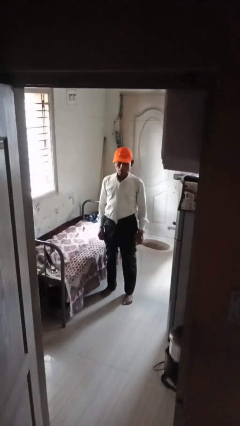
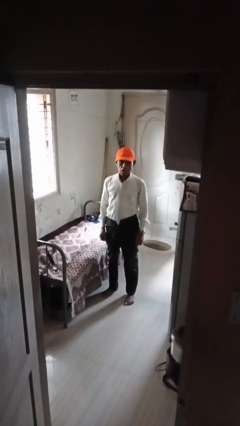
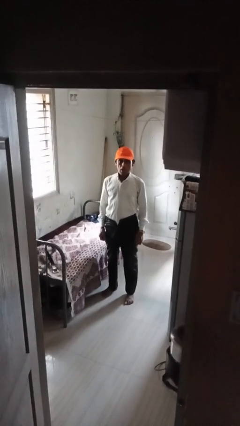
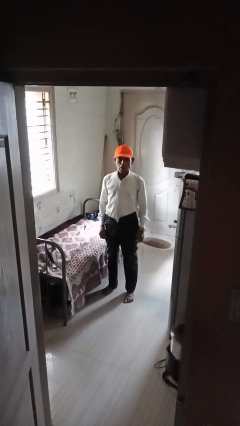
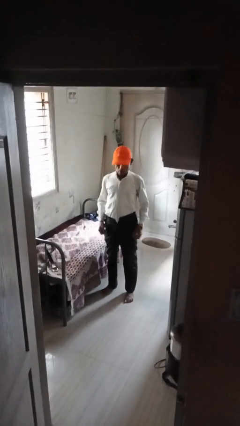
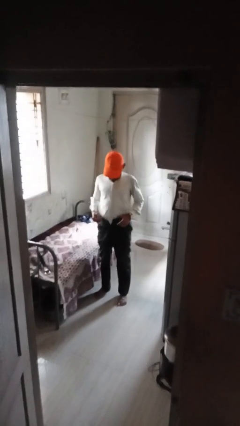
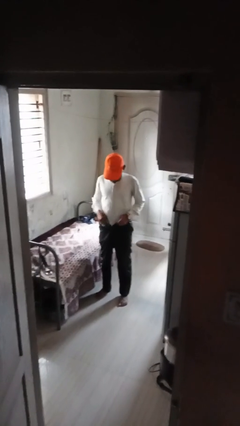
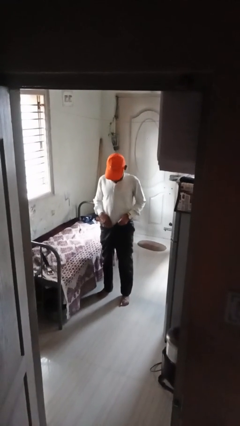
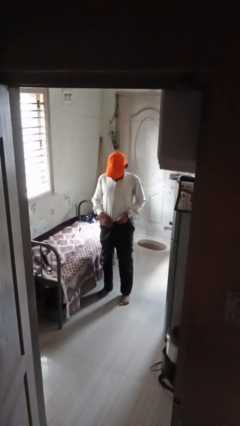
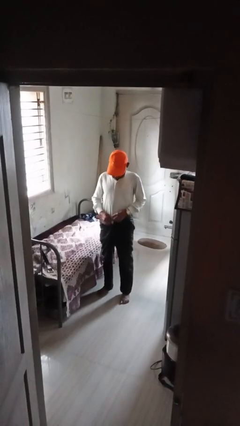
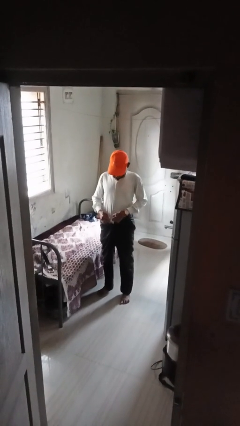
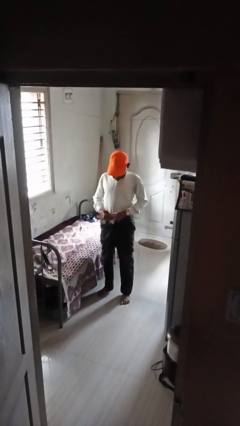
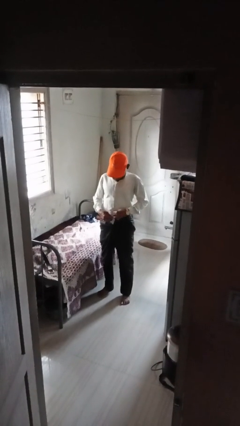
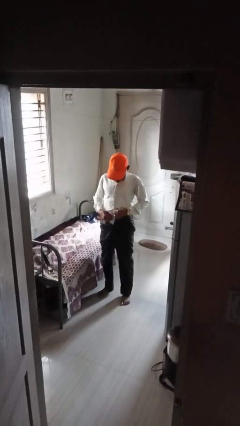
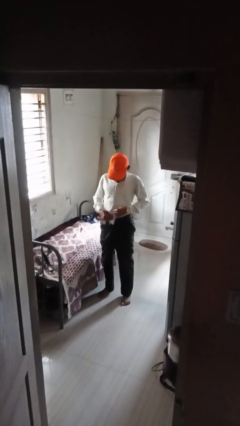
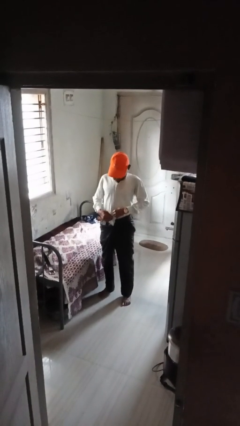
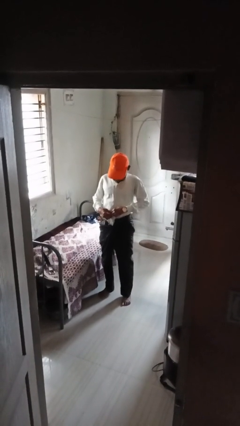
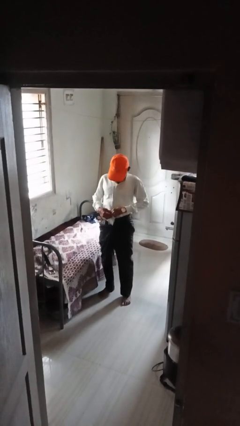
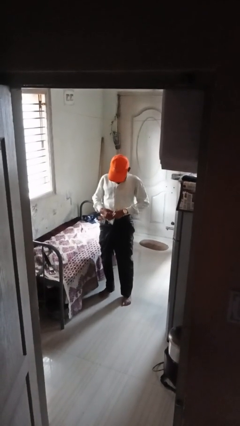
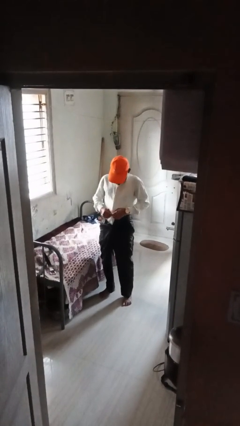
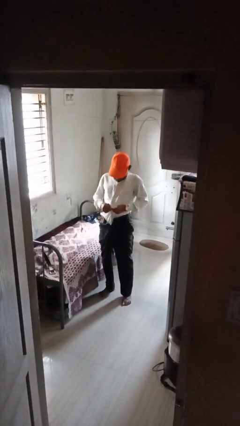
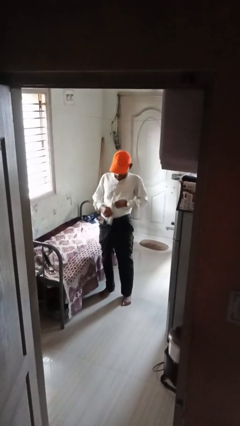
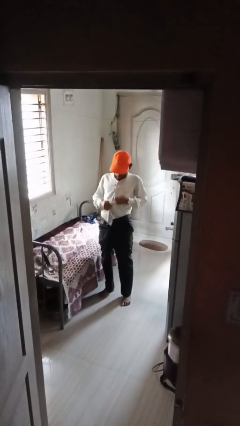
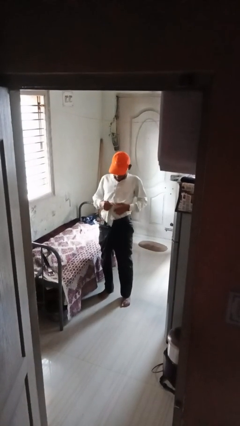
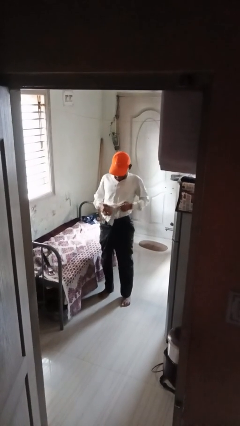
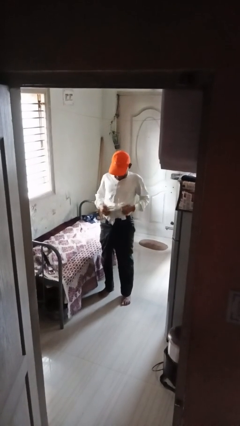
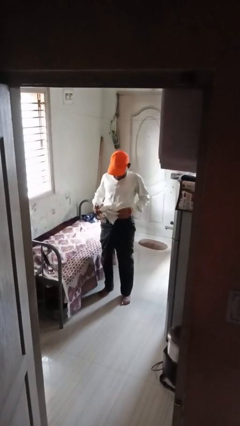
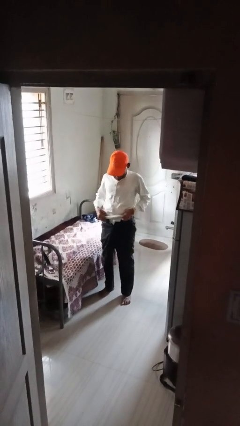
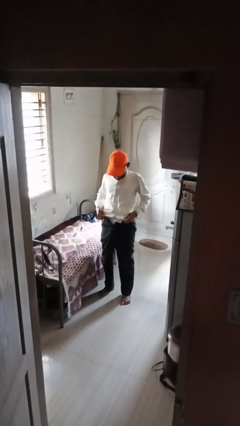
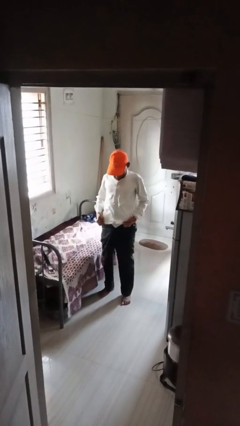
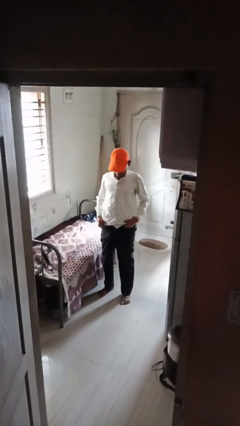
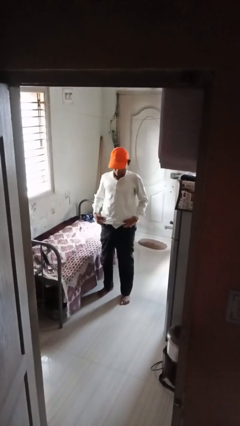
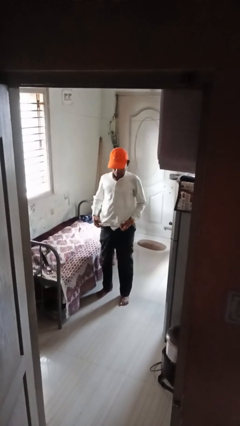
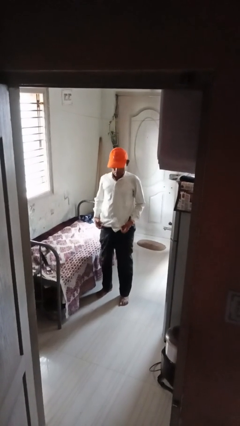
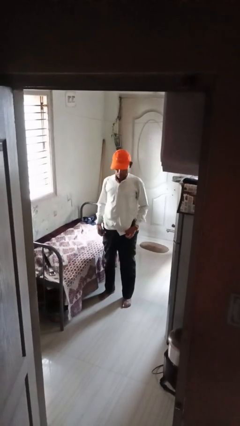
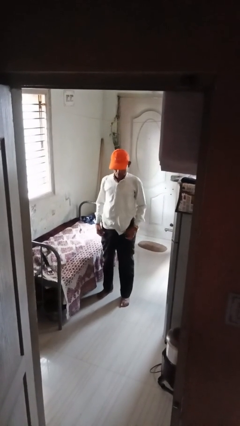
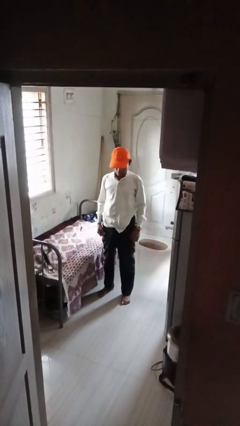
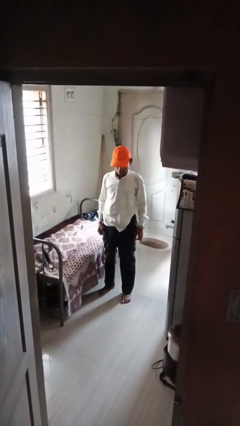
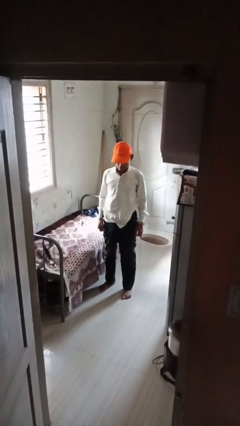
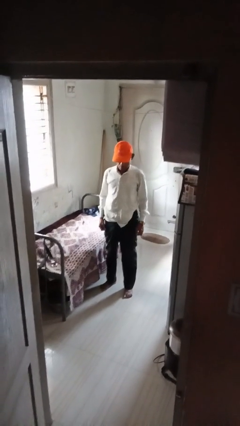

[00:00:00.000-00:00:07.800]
person untucks shirt

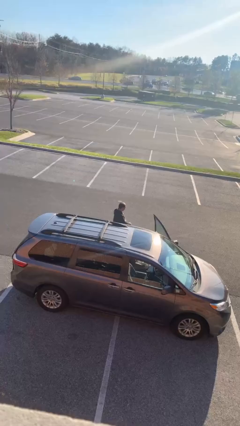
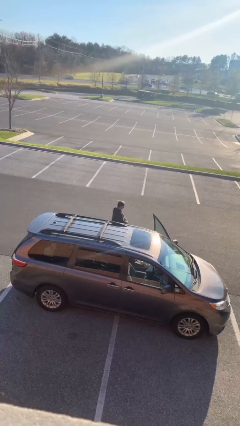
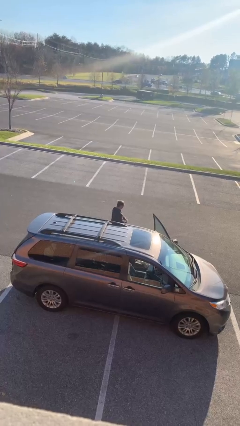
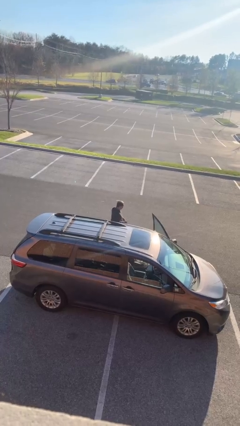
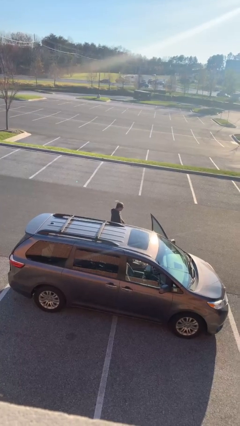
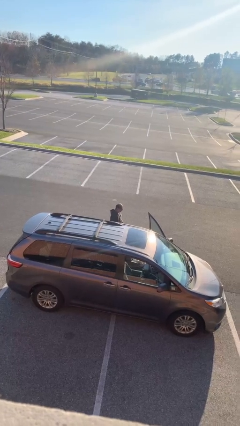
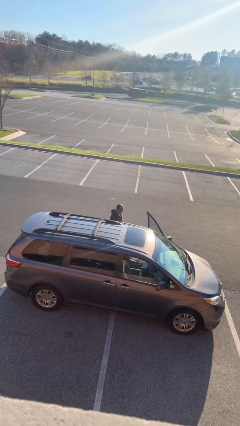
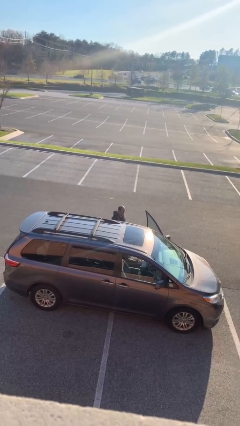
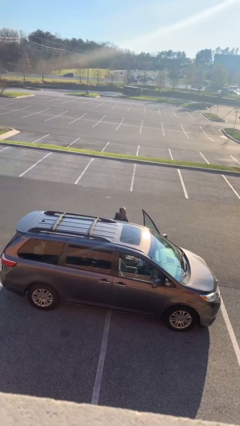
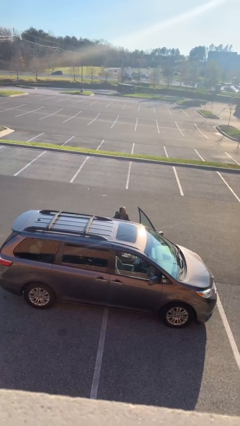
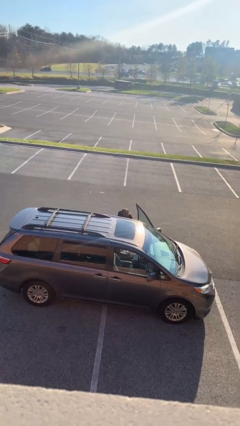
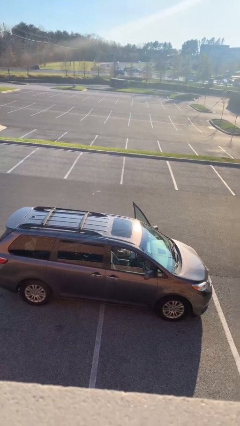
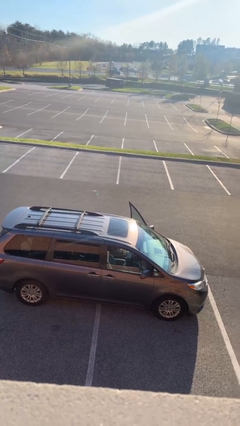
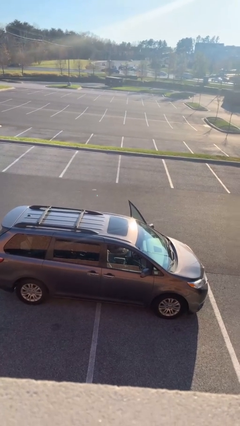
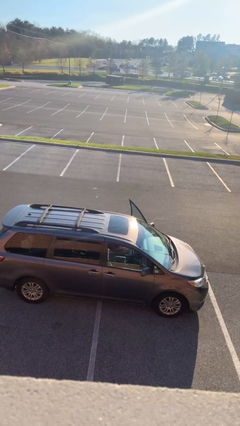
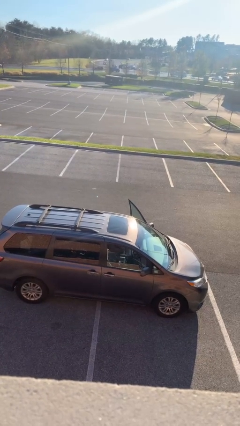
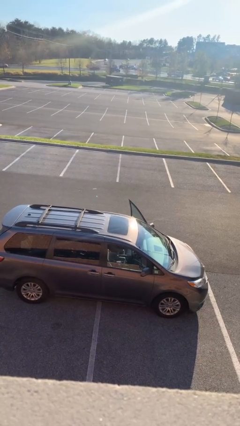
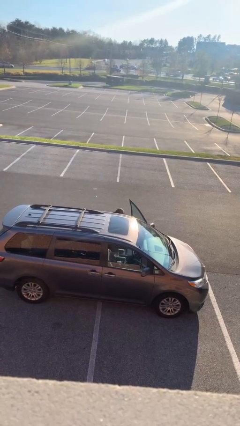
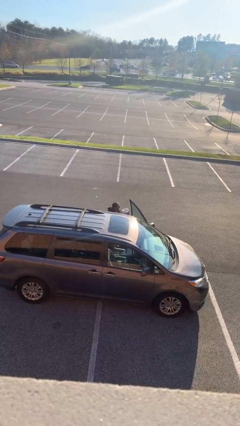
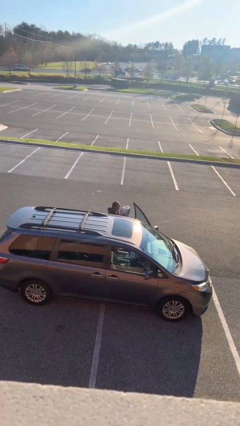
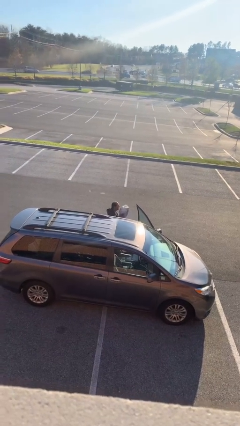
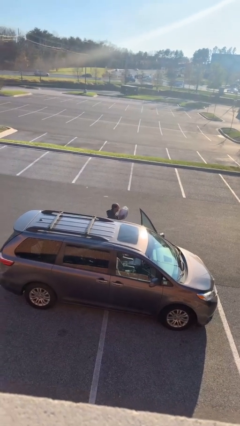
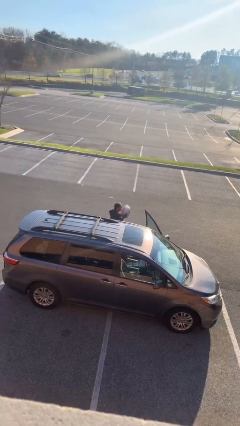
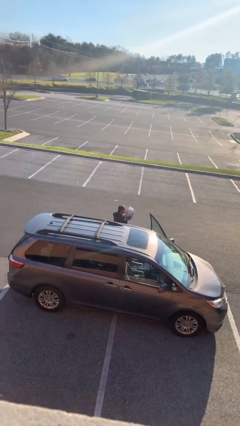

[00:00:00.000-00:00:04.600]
person unloads car

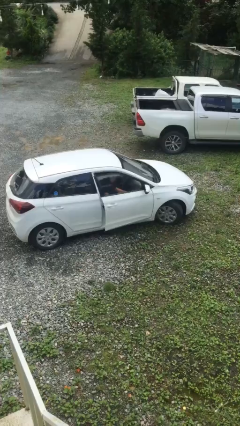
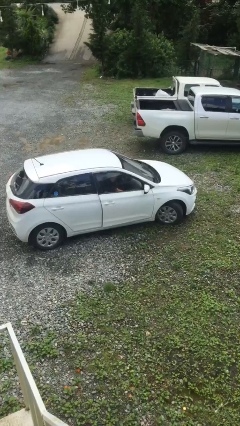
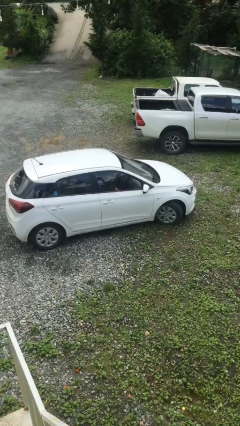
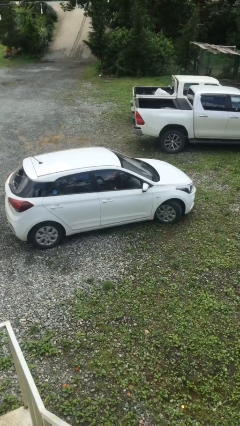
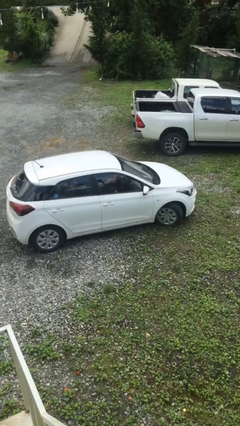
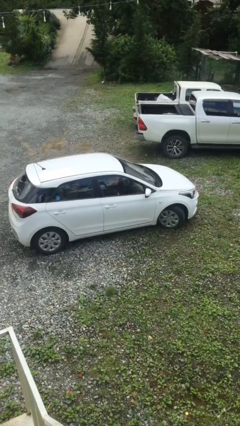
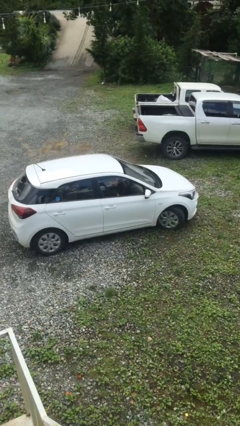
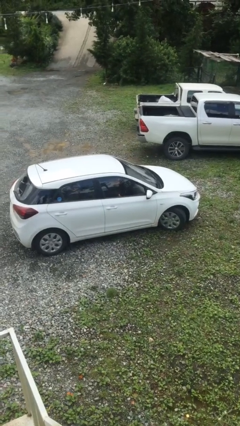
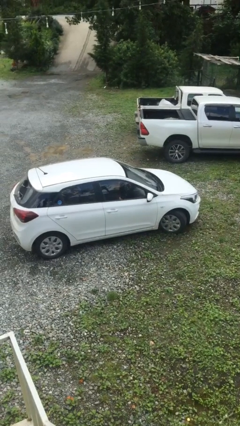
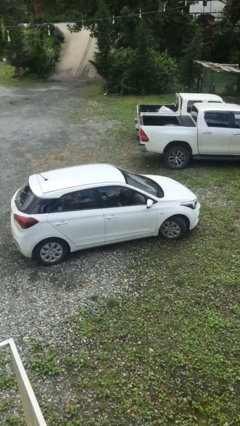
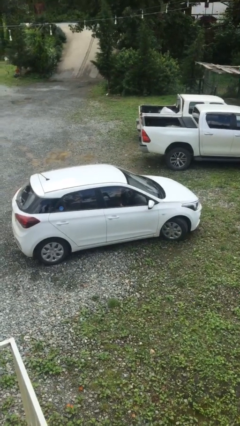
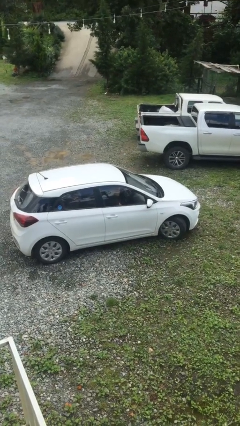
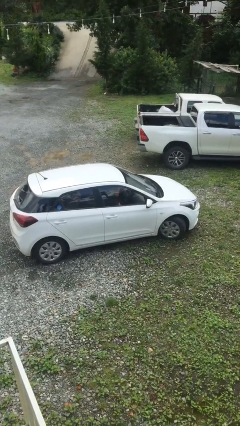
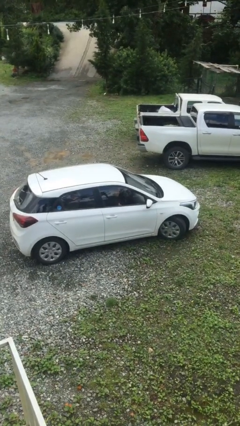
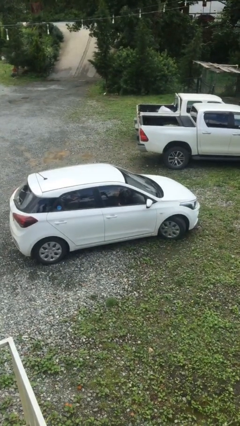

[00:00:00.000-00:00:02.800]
person closes car door

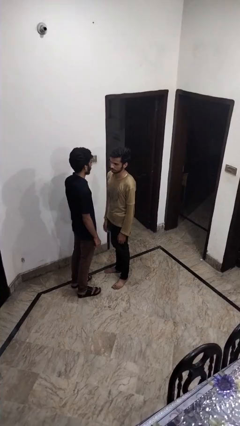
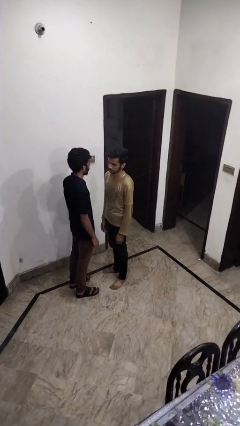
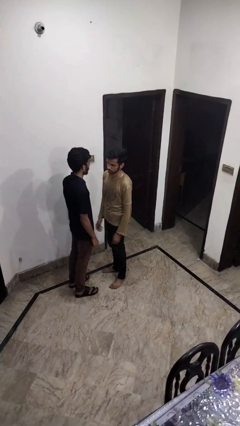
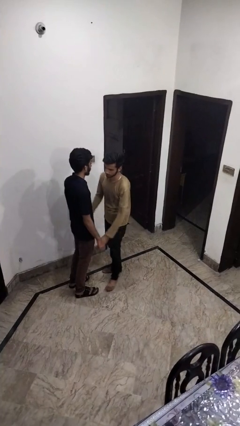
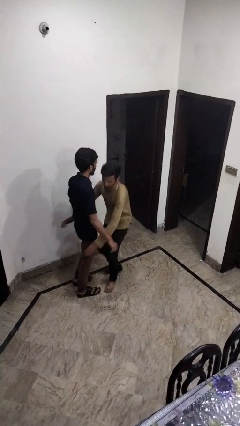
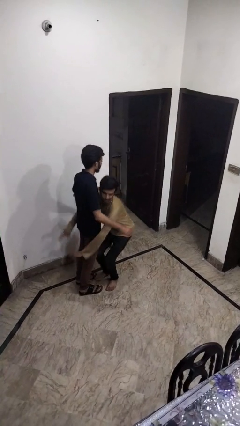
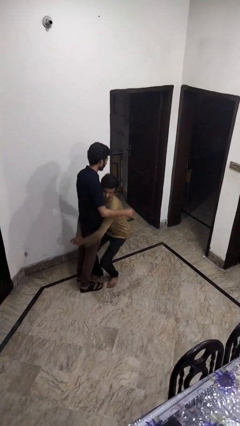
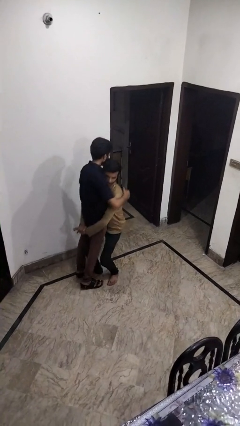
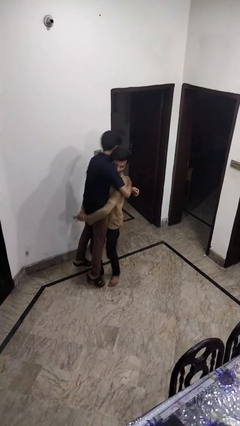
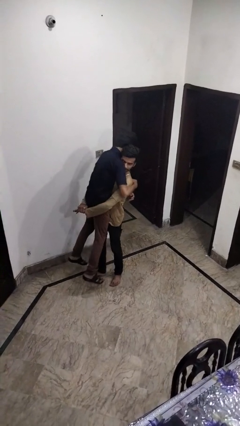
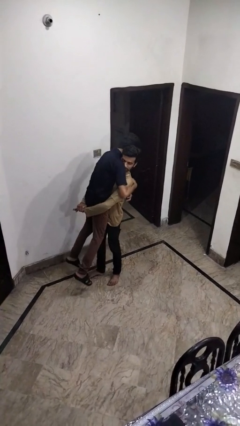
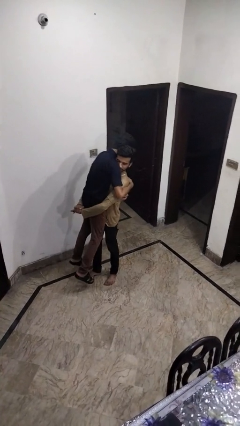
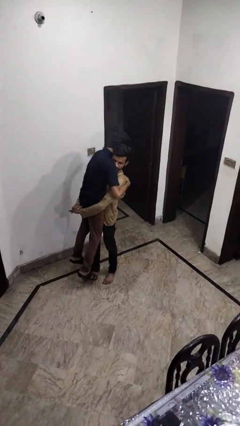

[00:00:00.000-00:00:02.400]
person picks up person
